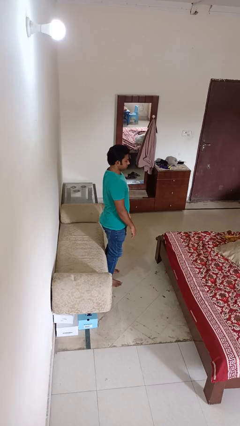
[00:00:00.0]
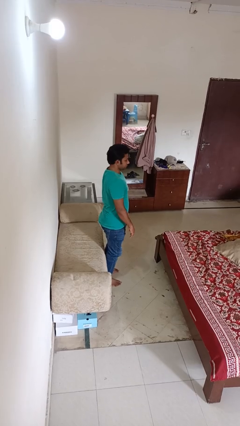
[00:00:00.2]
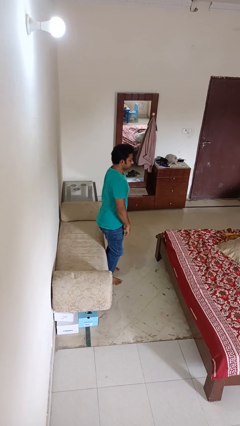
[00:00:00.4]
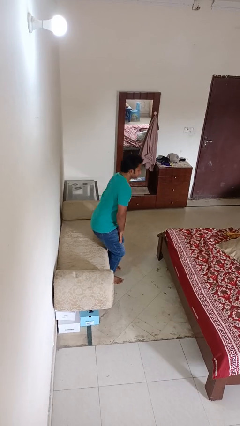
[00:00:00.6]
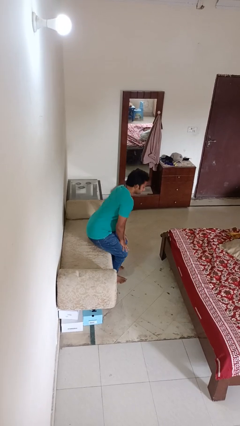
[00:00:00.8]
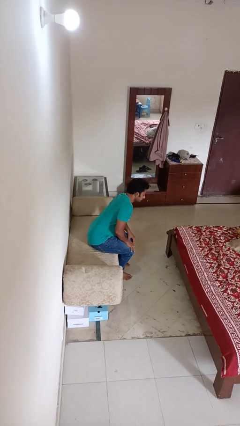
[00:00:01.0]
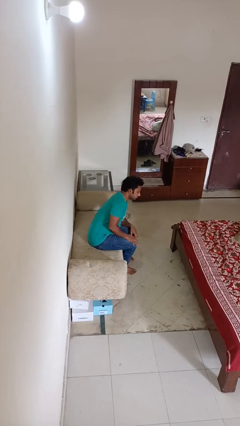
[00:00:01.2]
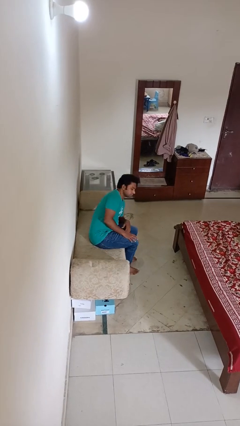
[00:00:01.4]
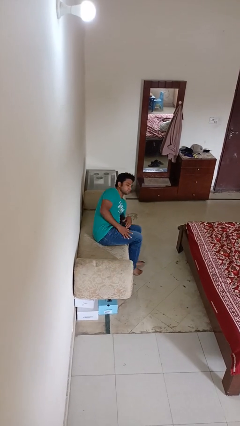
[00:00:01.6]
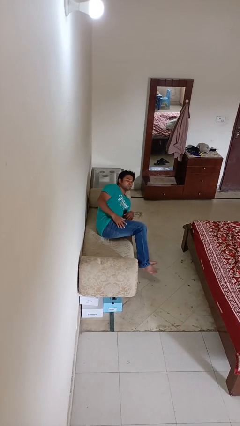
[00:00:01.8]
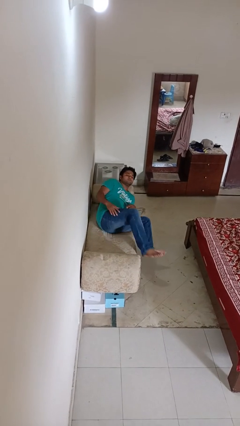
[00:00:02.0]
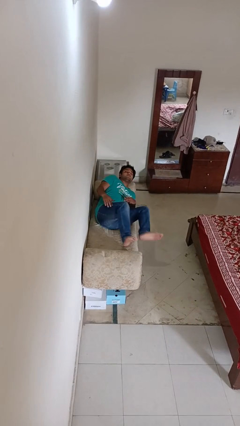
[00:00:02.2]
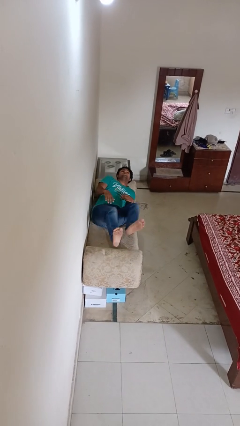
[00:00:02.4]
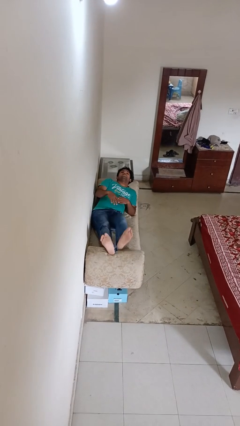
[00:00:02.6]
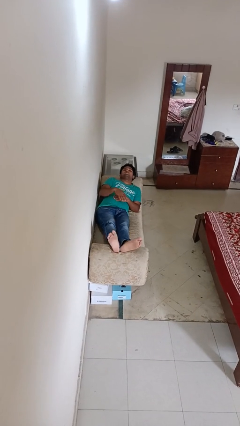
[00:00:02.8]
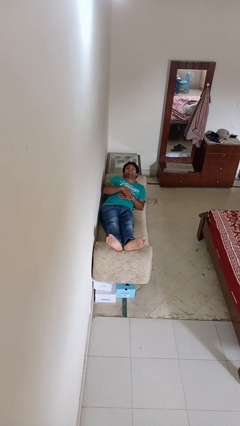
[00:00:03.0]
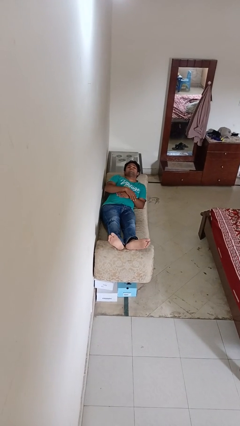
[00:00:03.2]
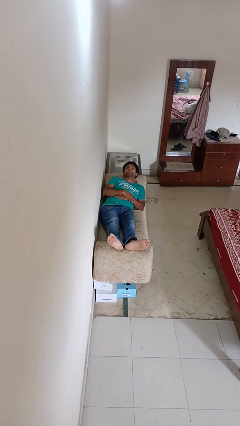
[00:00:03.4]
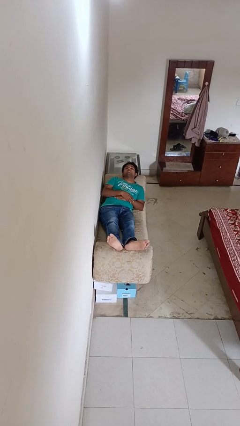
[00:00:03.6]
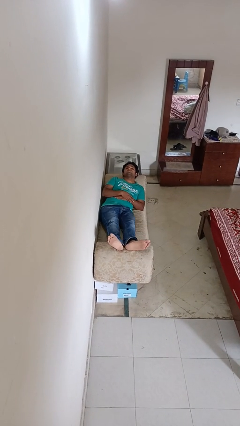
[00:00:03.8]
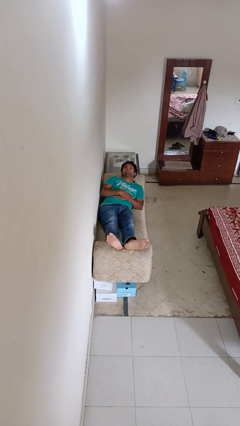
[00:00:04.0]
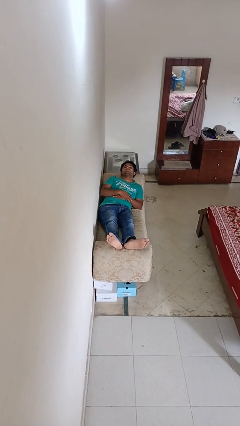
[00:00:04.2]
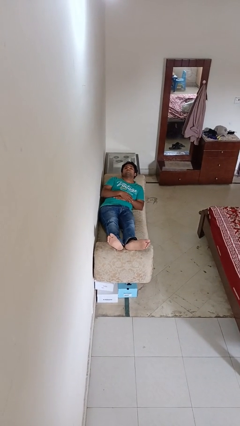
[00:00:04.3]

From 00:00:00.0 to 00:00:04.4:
person lies down on couch

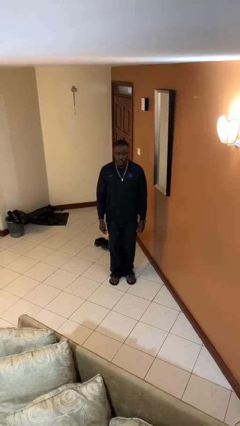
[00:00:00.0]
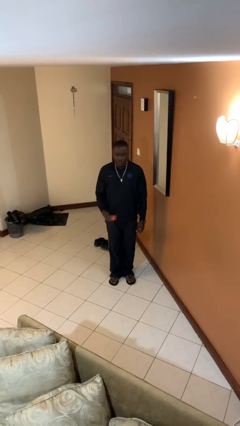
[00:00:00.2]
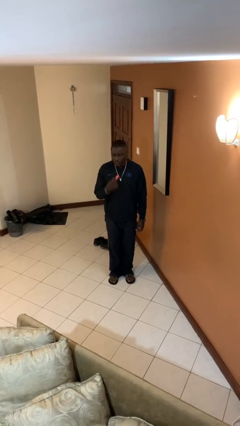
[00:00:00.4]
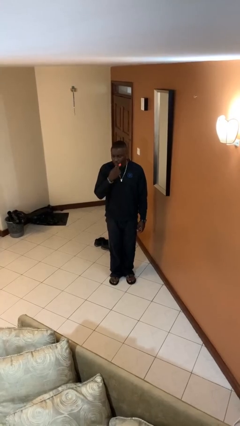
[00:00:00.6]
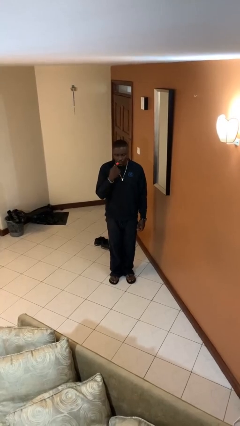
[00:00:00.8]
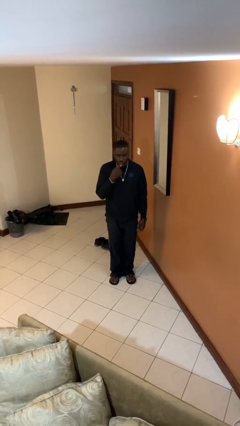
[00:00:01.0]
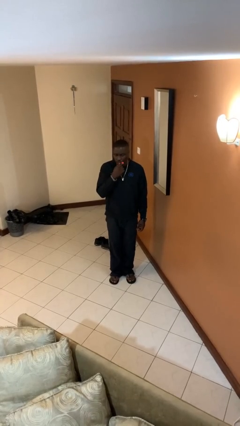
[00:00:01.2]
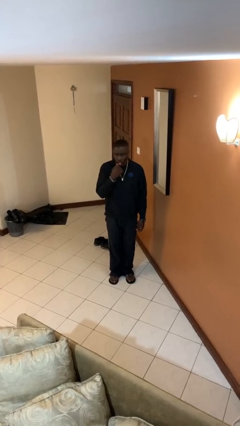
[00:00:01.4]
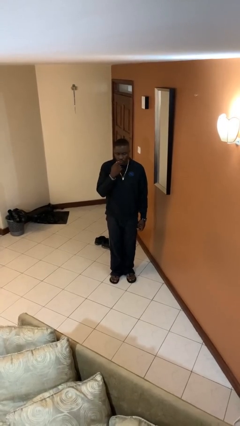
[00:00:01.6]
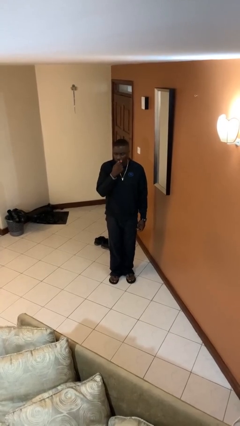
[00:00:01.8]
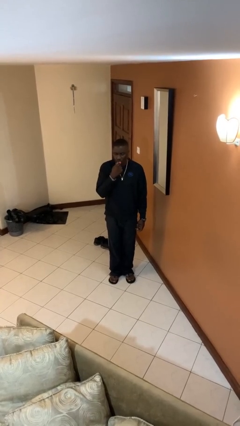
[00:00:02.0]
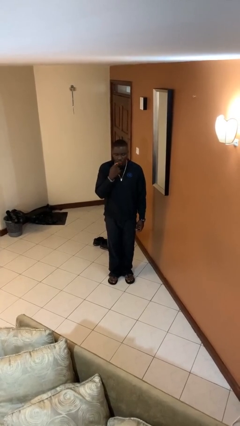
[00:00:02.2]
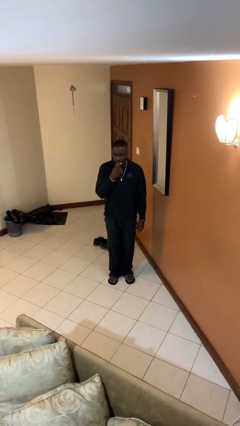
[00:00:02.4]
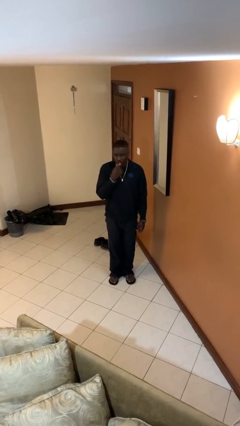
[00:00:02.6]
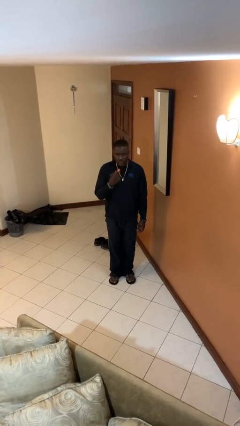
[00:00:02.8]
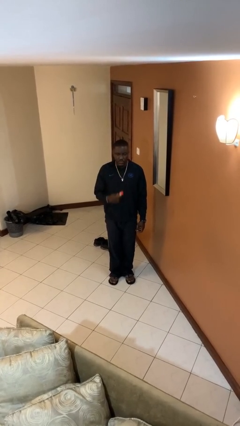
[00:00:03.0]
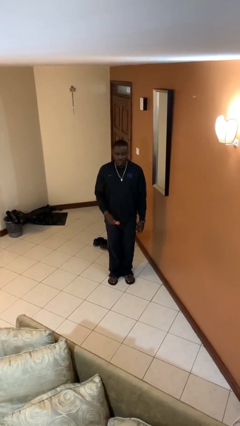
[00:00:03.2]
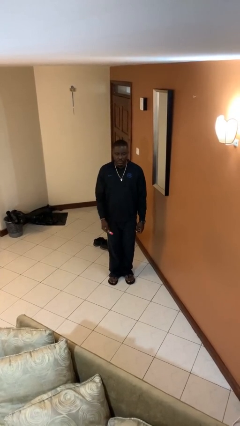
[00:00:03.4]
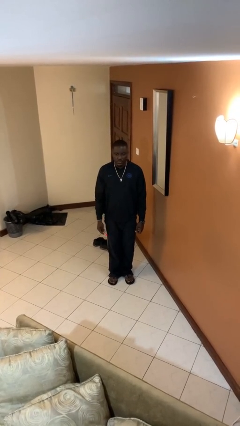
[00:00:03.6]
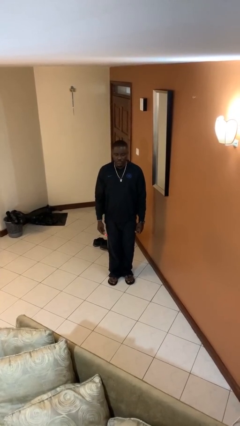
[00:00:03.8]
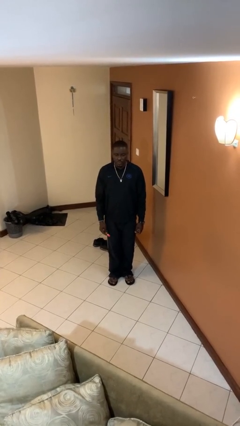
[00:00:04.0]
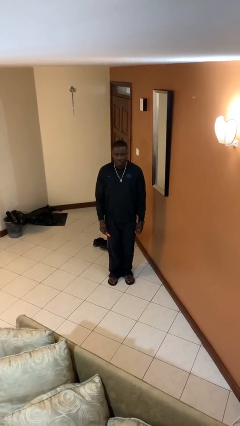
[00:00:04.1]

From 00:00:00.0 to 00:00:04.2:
person applies lip makeup

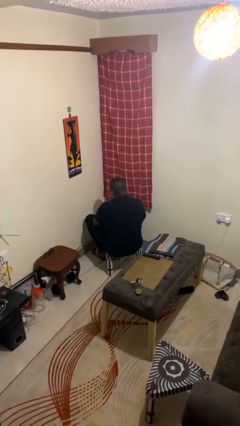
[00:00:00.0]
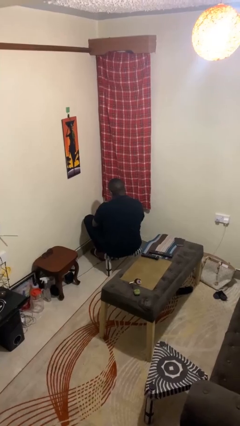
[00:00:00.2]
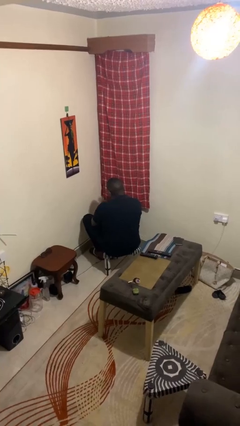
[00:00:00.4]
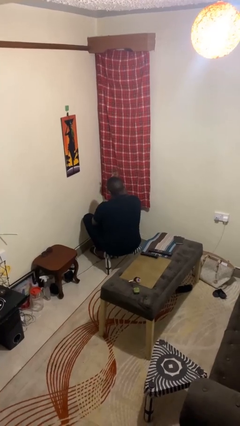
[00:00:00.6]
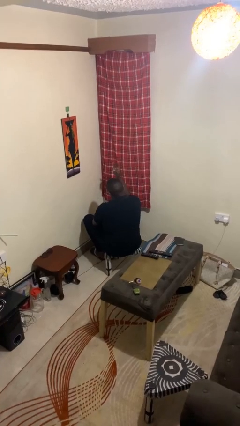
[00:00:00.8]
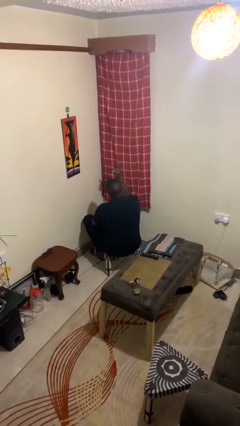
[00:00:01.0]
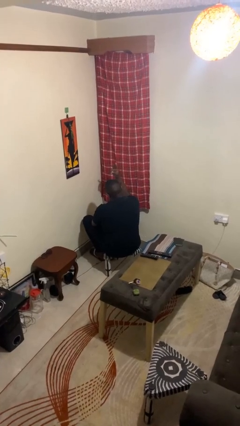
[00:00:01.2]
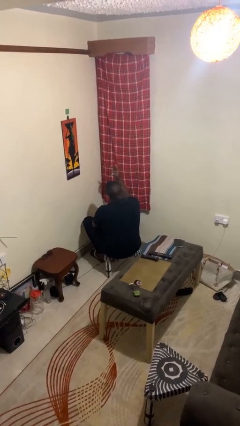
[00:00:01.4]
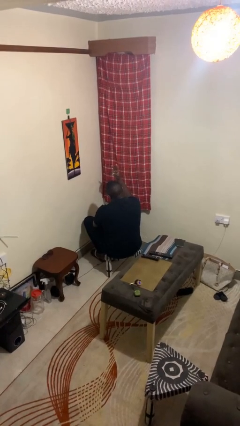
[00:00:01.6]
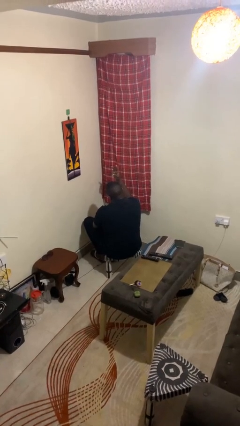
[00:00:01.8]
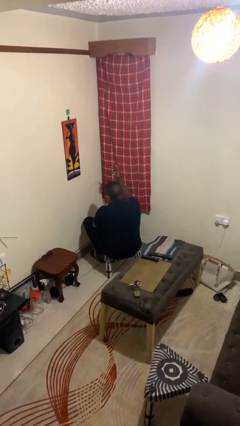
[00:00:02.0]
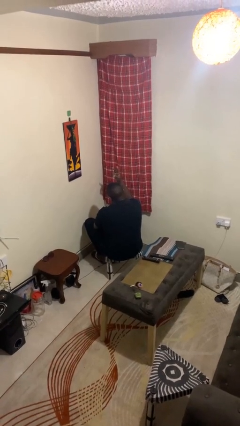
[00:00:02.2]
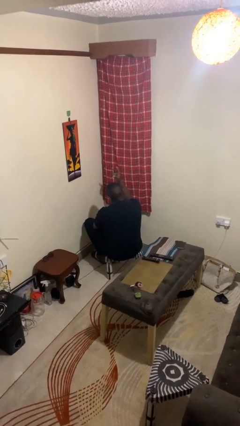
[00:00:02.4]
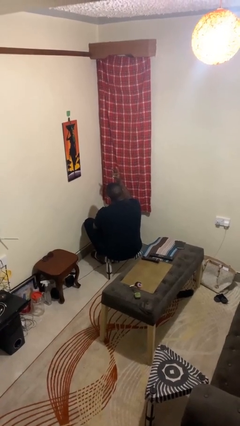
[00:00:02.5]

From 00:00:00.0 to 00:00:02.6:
person gestures peace

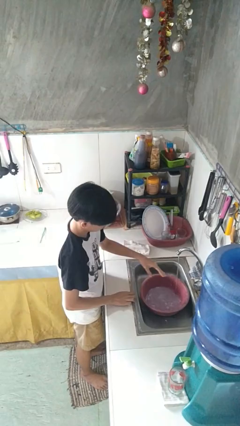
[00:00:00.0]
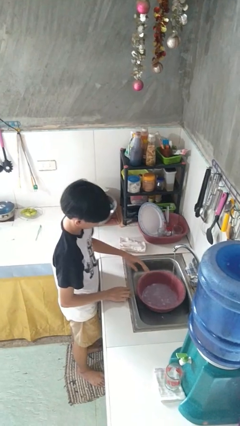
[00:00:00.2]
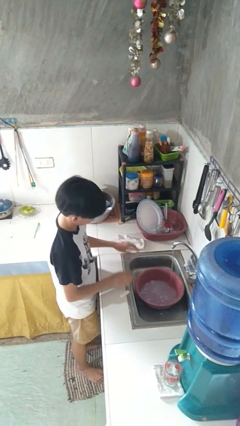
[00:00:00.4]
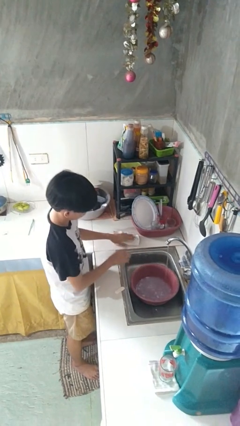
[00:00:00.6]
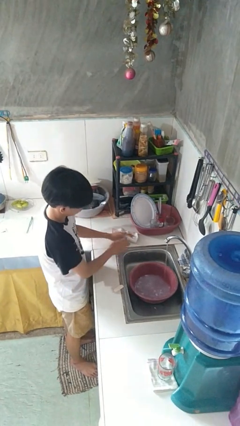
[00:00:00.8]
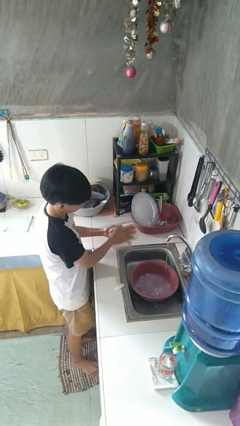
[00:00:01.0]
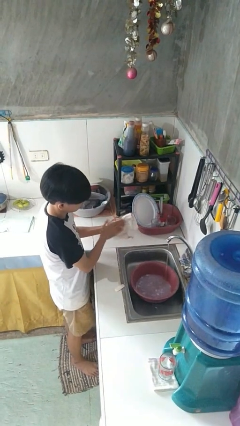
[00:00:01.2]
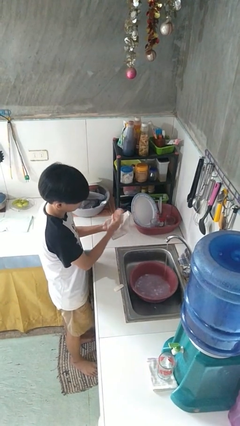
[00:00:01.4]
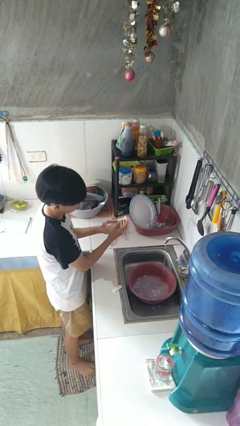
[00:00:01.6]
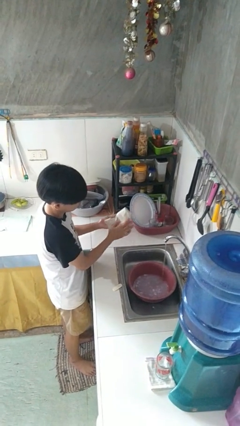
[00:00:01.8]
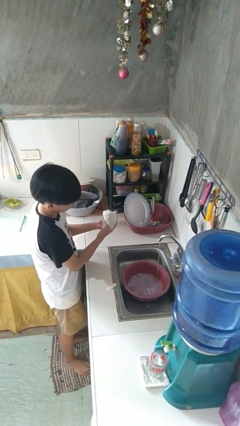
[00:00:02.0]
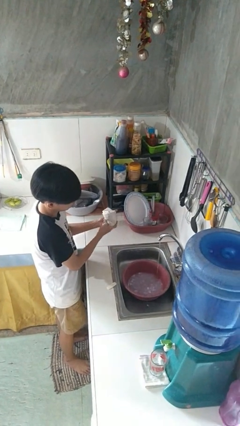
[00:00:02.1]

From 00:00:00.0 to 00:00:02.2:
person dries hands with towel

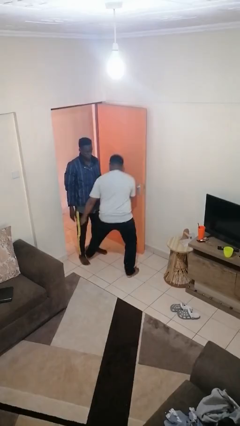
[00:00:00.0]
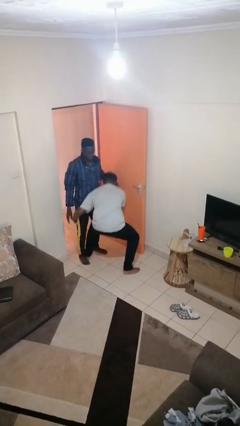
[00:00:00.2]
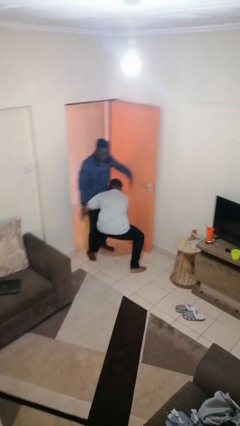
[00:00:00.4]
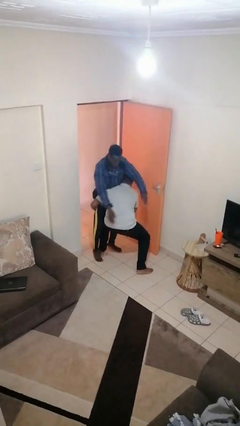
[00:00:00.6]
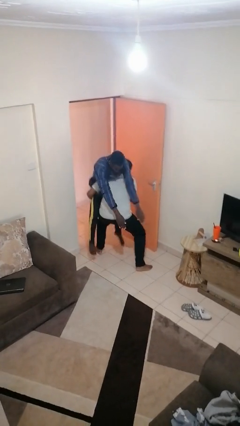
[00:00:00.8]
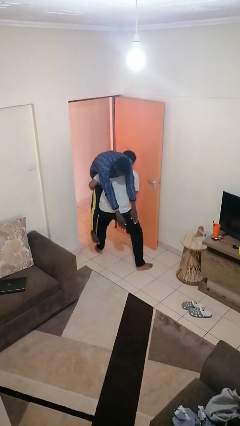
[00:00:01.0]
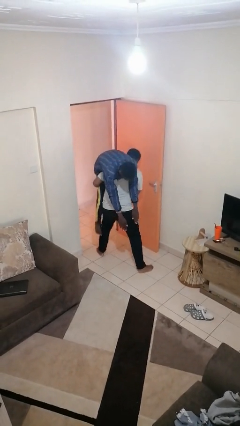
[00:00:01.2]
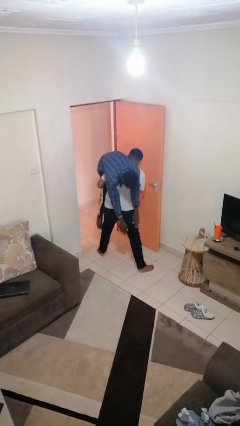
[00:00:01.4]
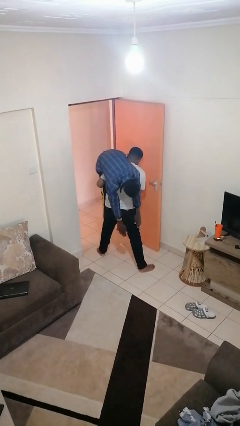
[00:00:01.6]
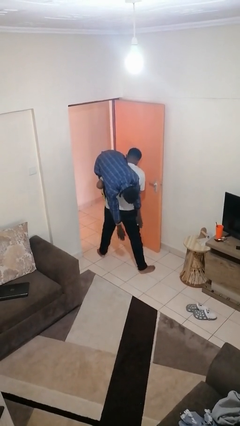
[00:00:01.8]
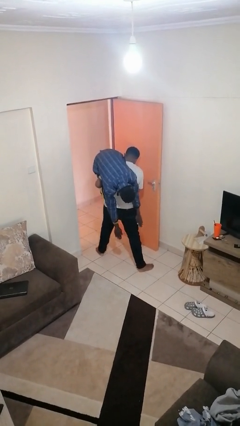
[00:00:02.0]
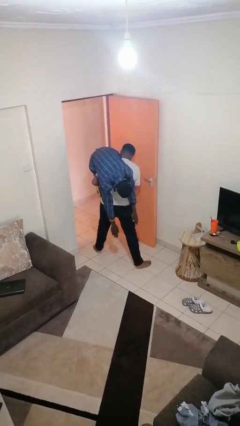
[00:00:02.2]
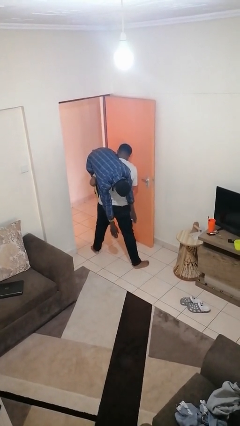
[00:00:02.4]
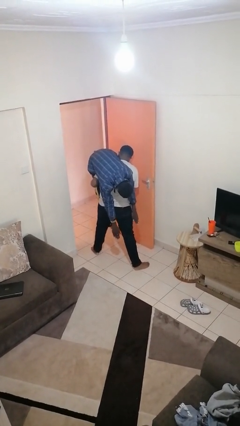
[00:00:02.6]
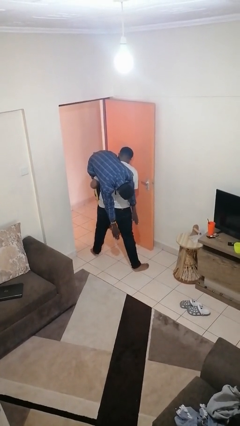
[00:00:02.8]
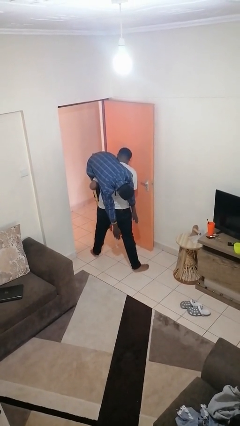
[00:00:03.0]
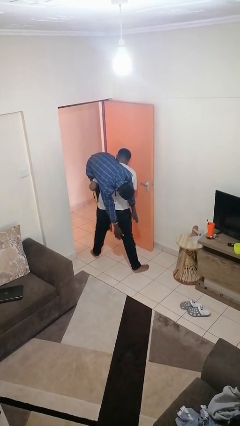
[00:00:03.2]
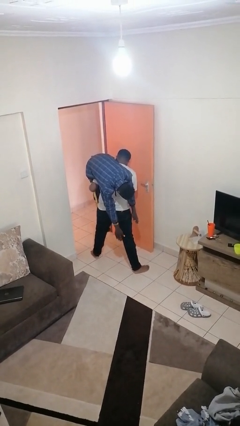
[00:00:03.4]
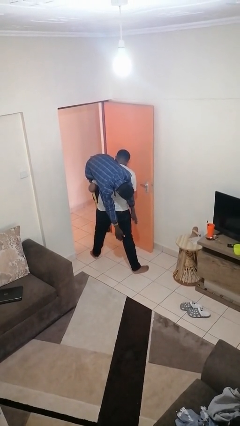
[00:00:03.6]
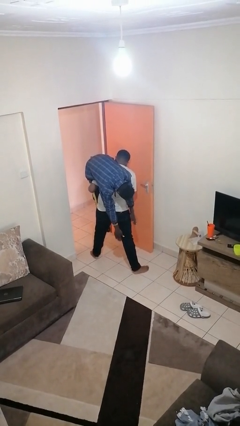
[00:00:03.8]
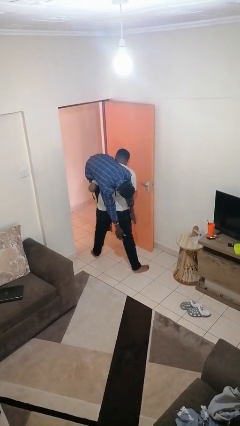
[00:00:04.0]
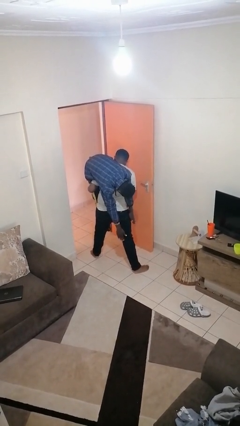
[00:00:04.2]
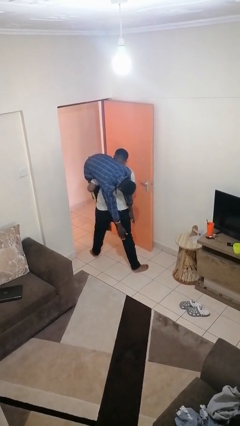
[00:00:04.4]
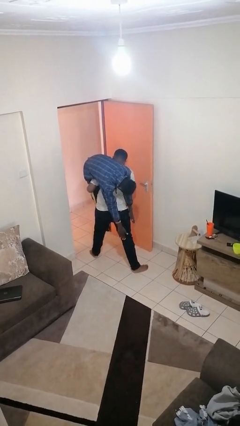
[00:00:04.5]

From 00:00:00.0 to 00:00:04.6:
person carries person over shoulder
